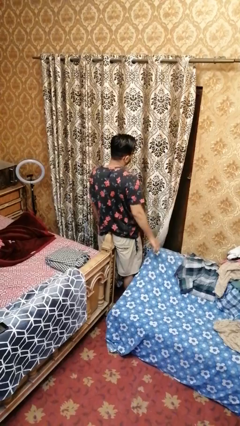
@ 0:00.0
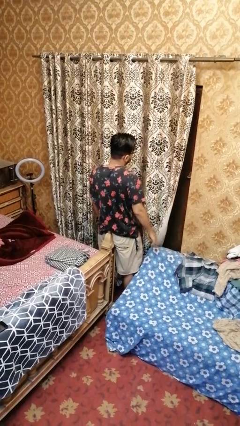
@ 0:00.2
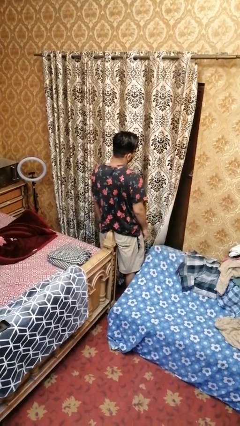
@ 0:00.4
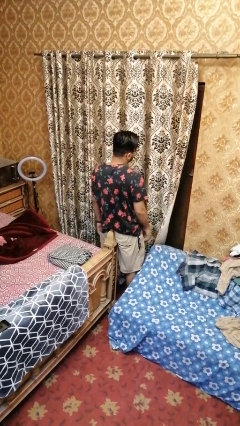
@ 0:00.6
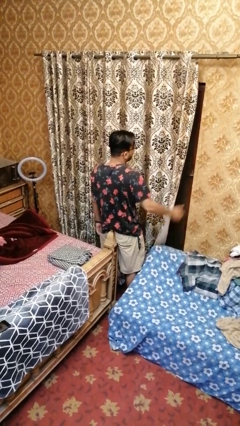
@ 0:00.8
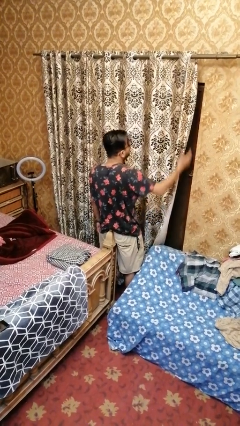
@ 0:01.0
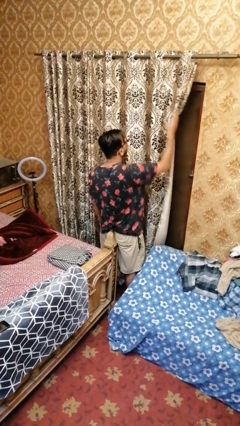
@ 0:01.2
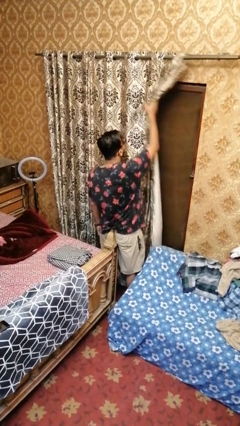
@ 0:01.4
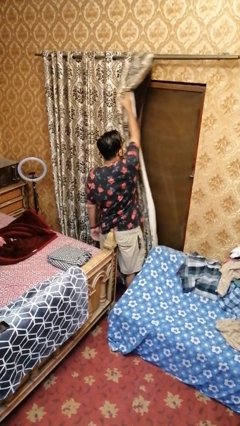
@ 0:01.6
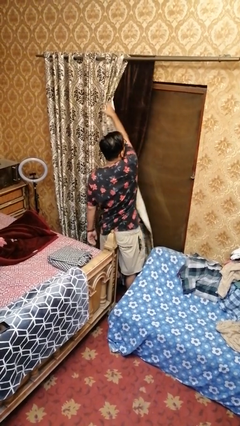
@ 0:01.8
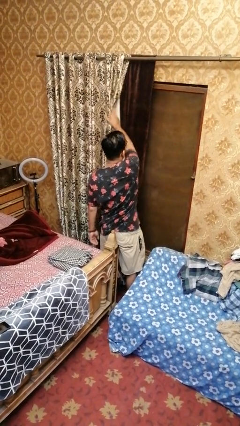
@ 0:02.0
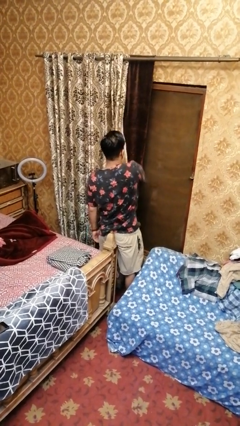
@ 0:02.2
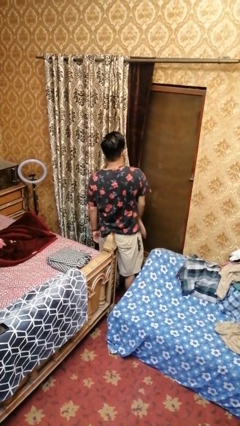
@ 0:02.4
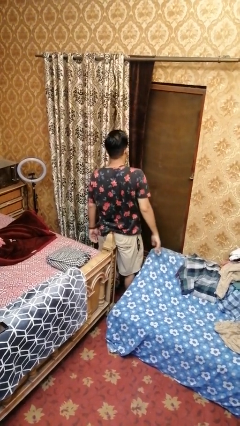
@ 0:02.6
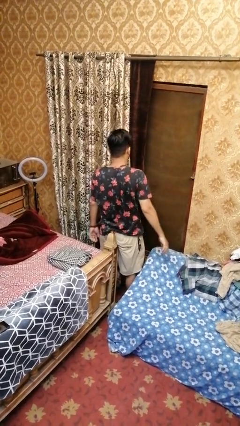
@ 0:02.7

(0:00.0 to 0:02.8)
person opens curtains

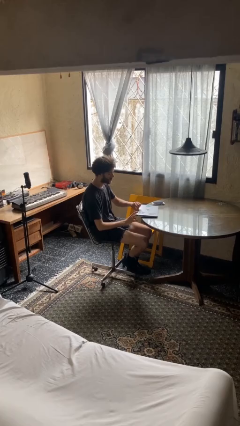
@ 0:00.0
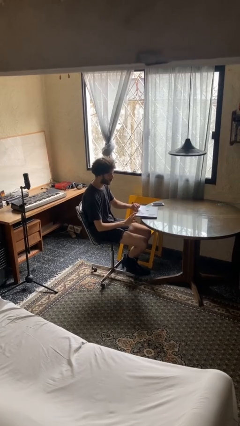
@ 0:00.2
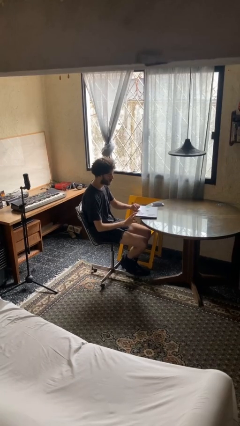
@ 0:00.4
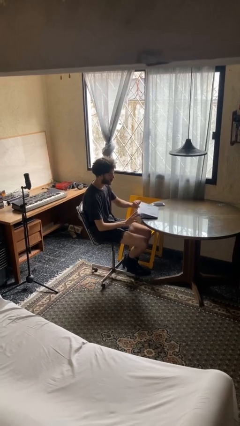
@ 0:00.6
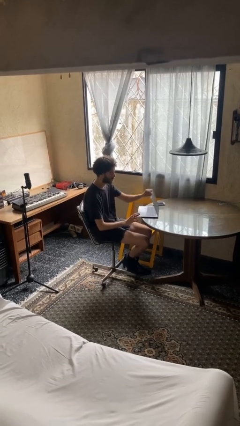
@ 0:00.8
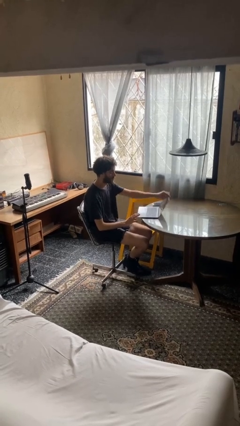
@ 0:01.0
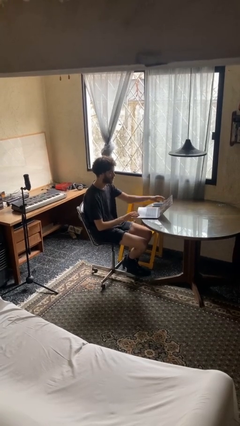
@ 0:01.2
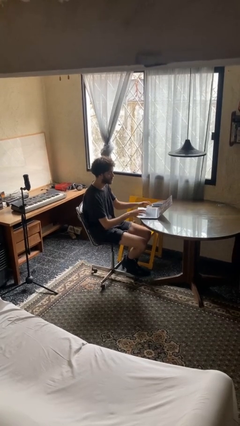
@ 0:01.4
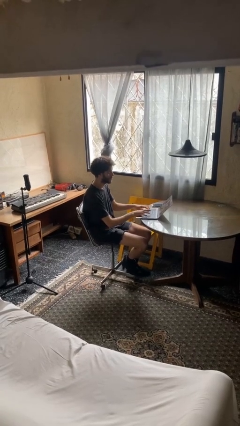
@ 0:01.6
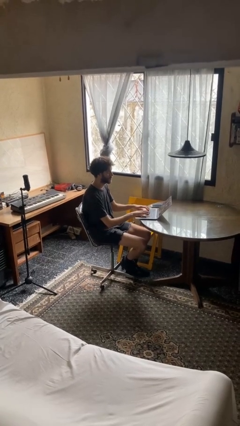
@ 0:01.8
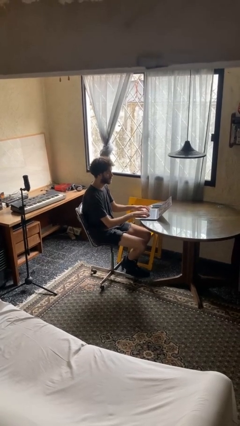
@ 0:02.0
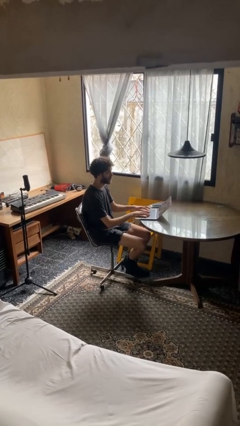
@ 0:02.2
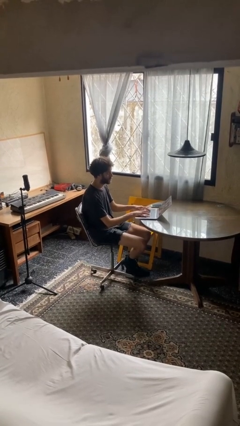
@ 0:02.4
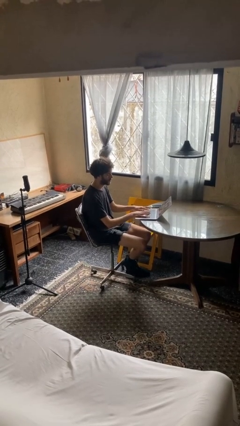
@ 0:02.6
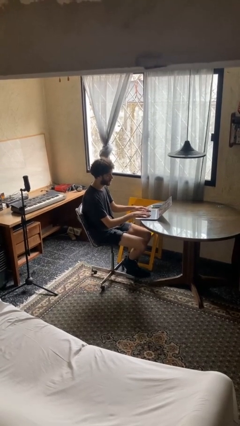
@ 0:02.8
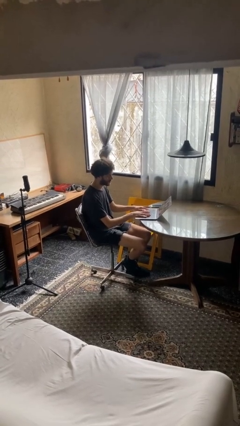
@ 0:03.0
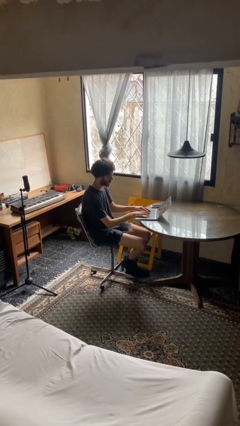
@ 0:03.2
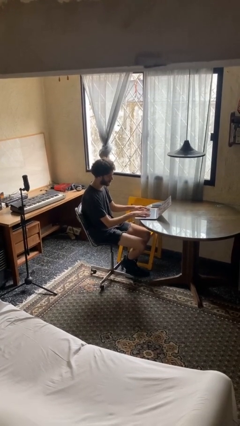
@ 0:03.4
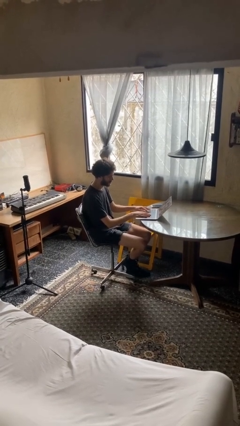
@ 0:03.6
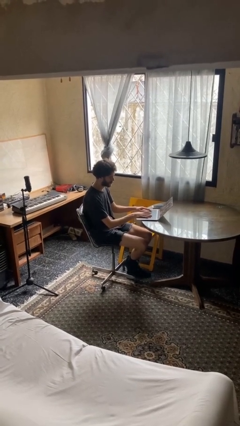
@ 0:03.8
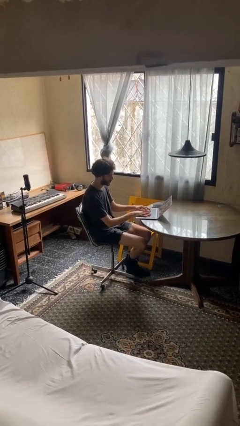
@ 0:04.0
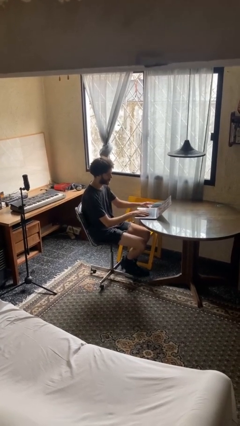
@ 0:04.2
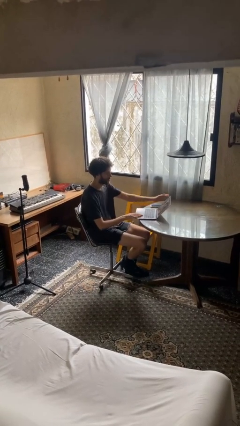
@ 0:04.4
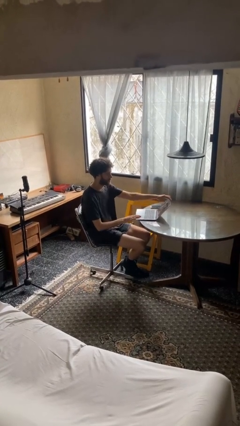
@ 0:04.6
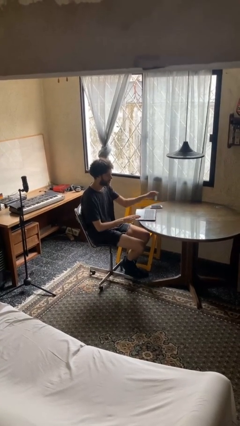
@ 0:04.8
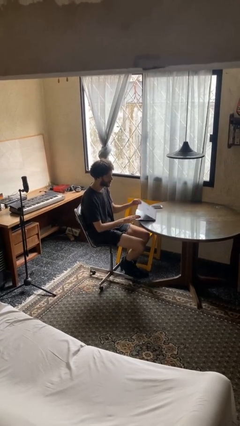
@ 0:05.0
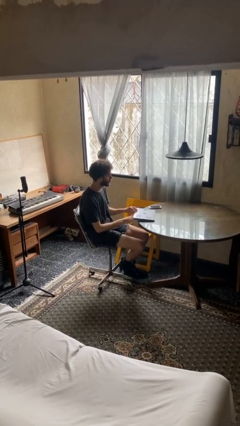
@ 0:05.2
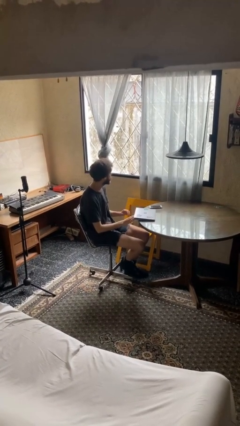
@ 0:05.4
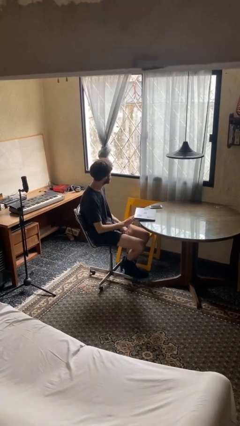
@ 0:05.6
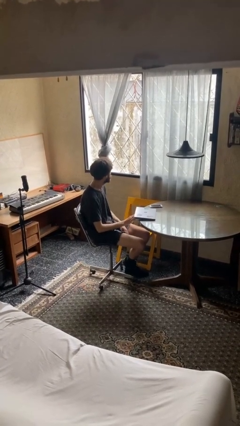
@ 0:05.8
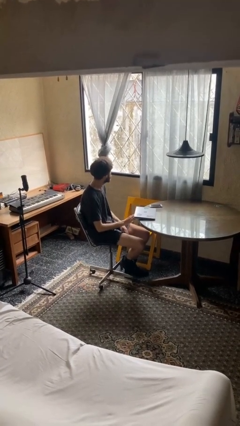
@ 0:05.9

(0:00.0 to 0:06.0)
person interacts with laptop

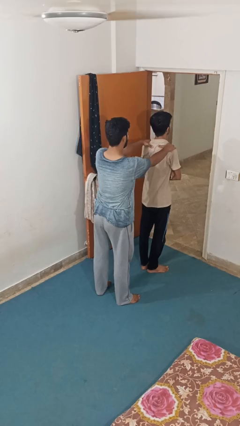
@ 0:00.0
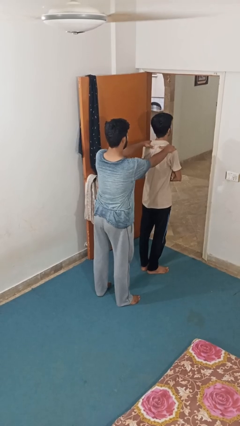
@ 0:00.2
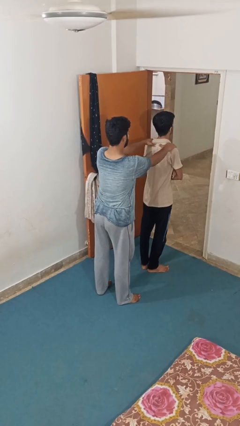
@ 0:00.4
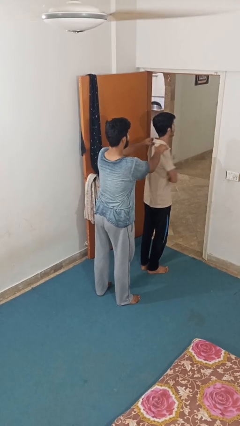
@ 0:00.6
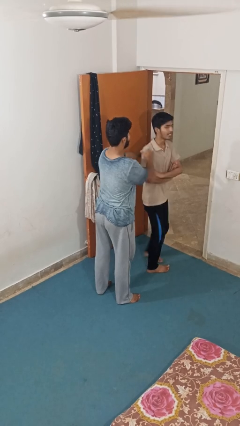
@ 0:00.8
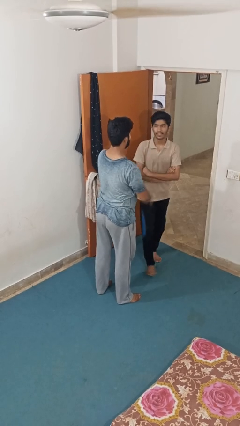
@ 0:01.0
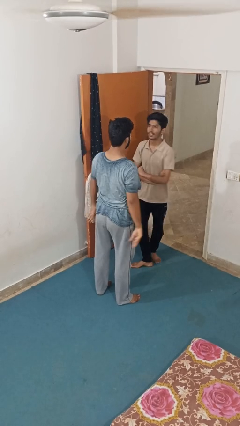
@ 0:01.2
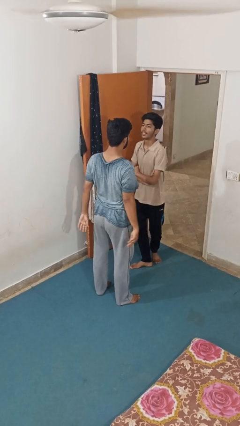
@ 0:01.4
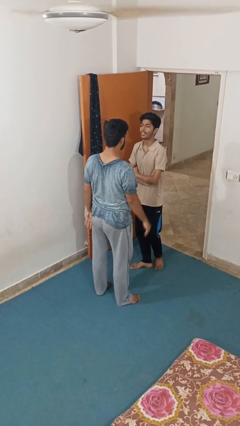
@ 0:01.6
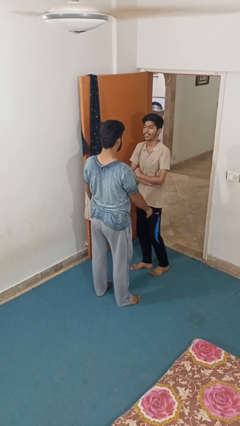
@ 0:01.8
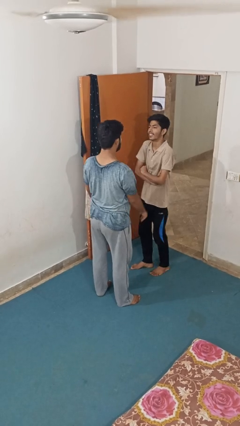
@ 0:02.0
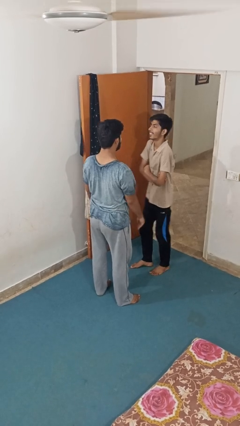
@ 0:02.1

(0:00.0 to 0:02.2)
person spins person around

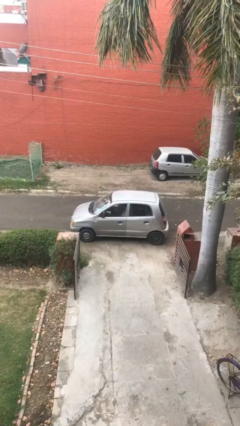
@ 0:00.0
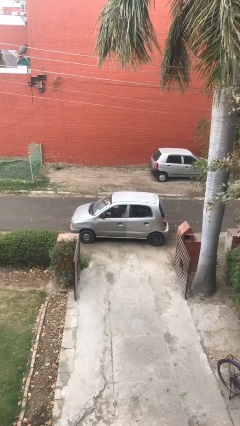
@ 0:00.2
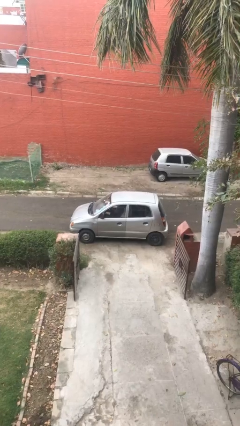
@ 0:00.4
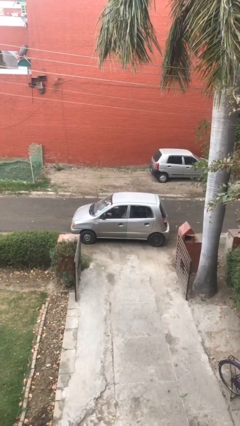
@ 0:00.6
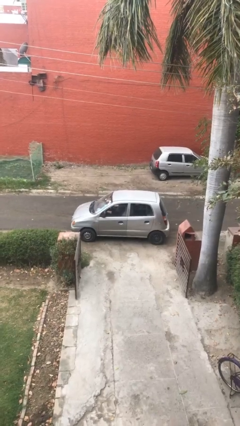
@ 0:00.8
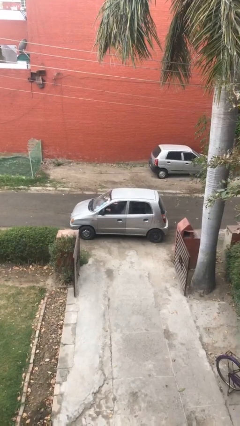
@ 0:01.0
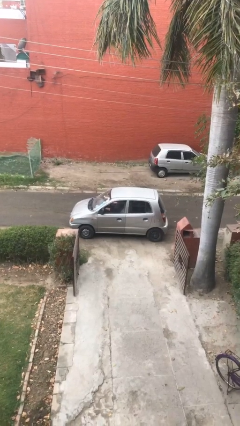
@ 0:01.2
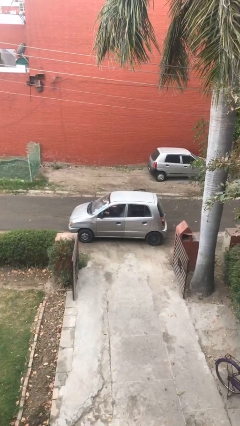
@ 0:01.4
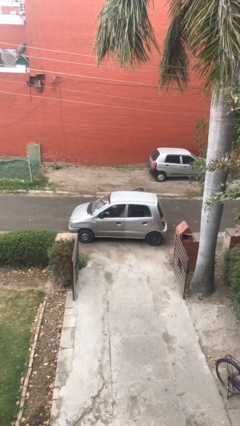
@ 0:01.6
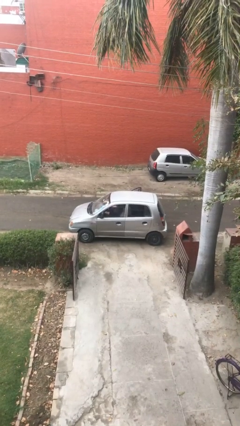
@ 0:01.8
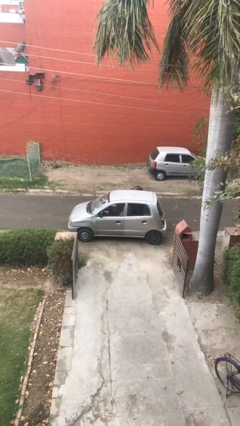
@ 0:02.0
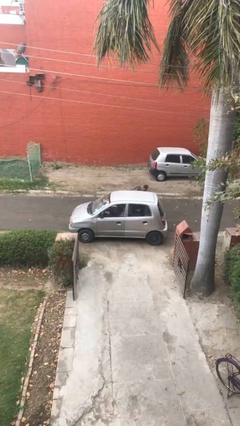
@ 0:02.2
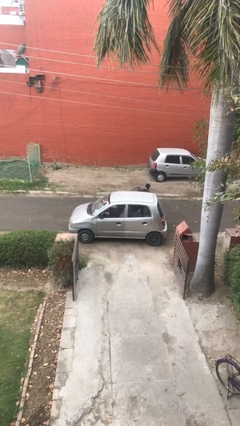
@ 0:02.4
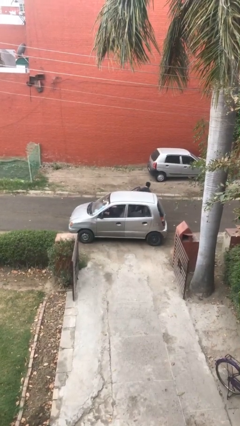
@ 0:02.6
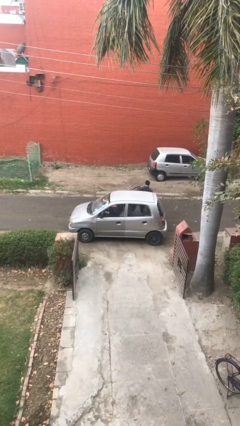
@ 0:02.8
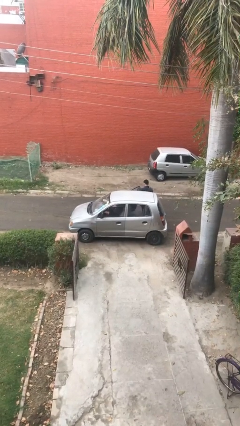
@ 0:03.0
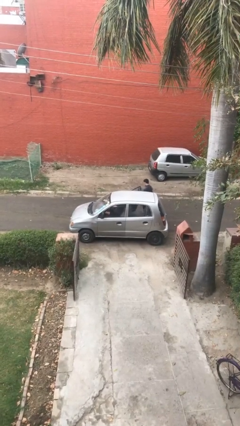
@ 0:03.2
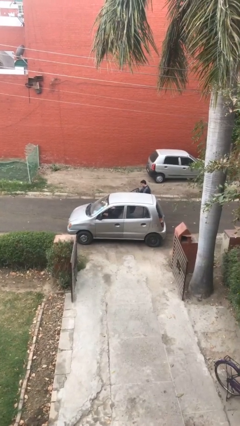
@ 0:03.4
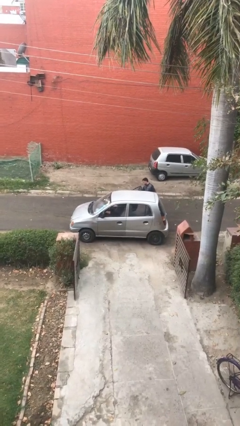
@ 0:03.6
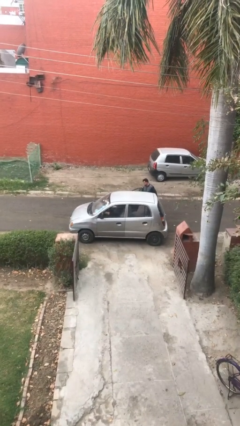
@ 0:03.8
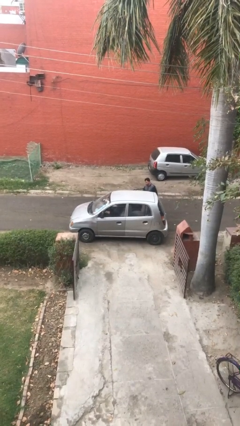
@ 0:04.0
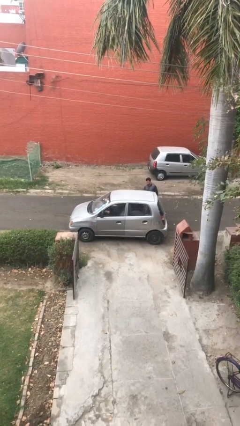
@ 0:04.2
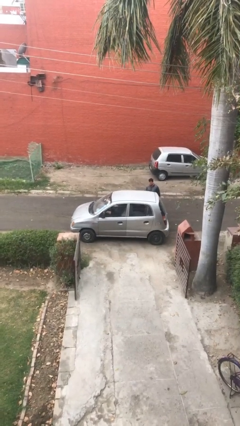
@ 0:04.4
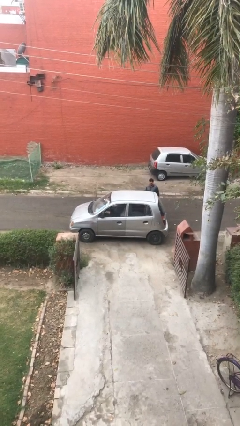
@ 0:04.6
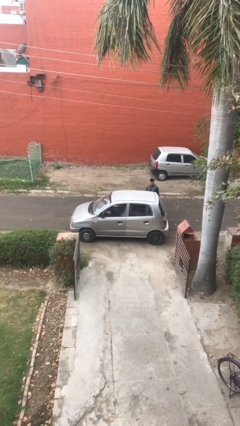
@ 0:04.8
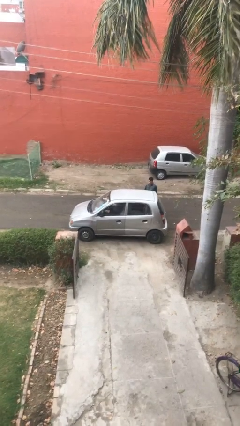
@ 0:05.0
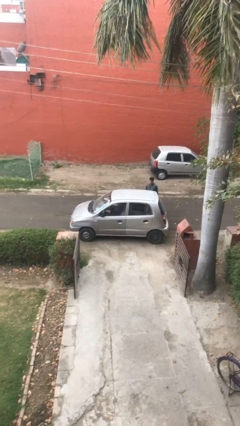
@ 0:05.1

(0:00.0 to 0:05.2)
car drops off person

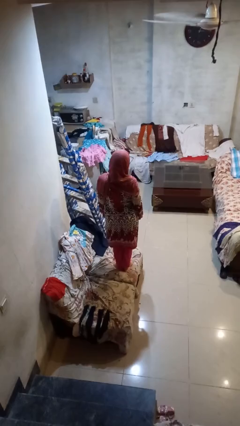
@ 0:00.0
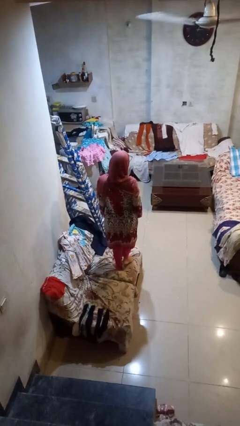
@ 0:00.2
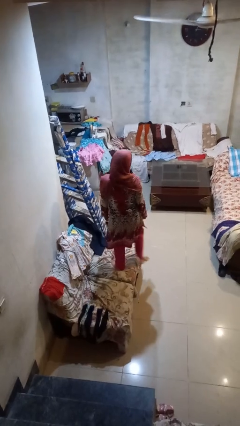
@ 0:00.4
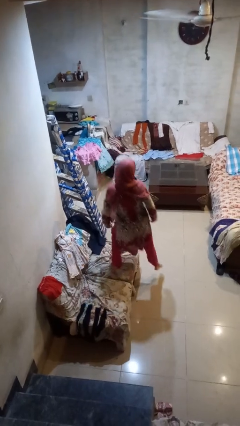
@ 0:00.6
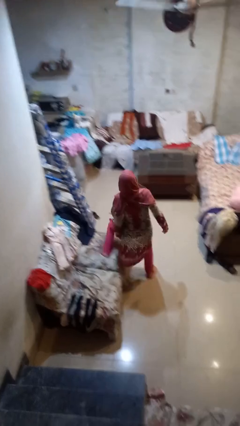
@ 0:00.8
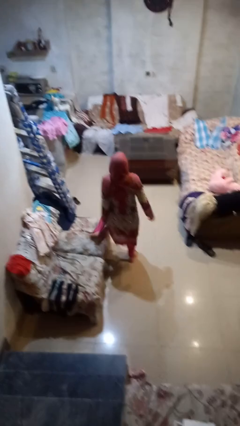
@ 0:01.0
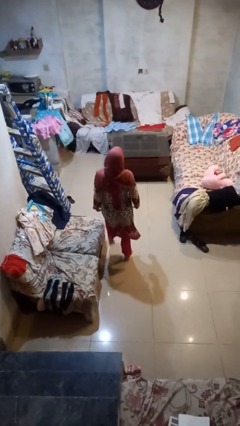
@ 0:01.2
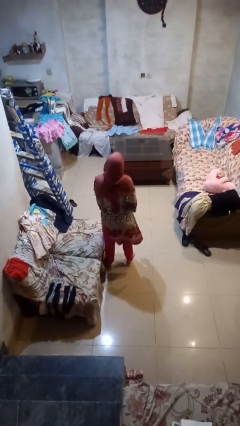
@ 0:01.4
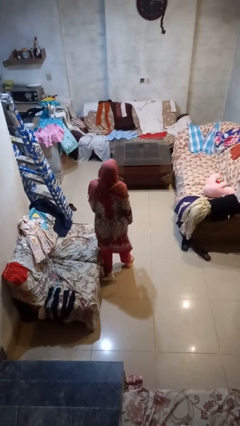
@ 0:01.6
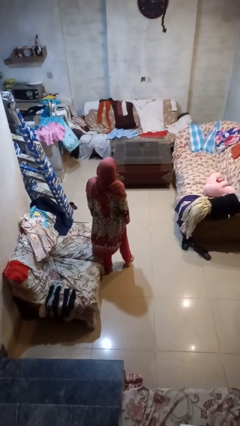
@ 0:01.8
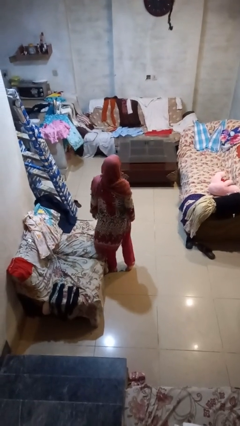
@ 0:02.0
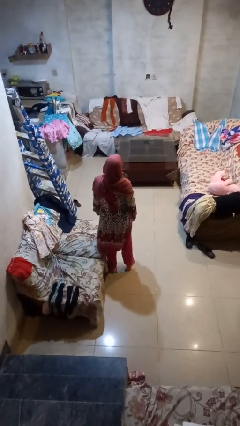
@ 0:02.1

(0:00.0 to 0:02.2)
person climbs off couch
